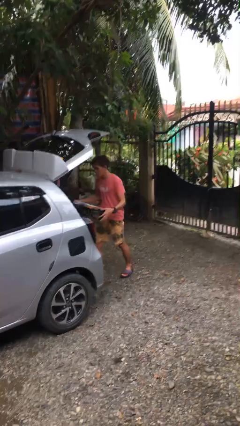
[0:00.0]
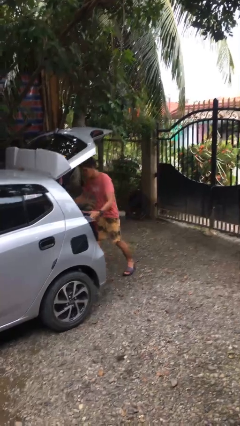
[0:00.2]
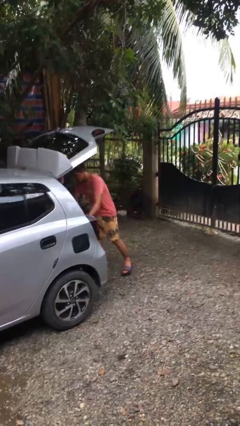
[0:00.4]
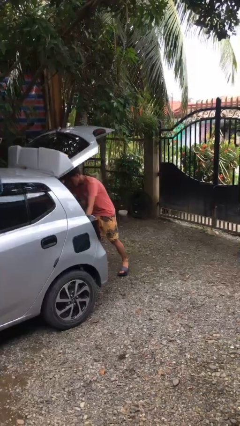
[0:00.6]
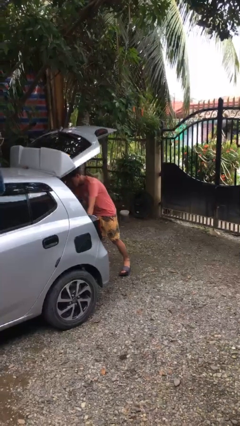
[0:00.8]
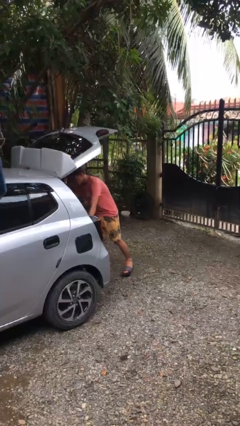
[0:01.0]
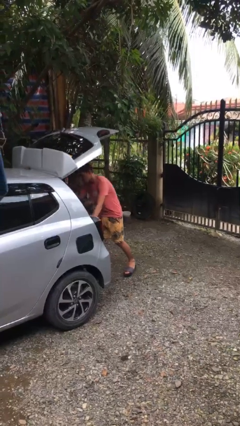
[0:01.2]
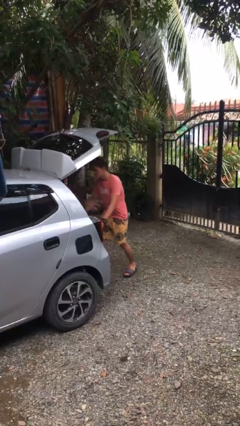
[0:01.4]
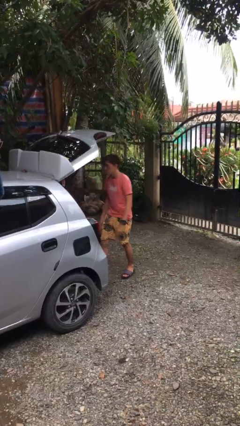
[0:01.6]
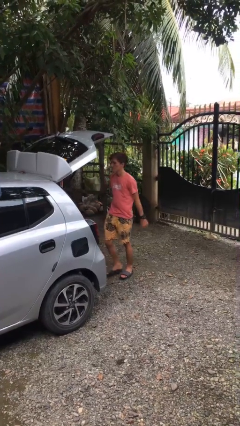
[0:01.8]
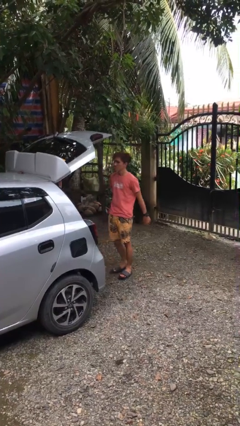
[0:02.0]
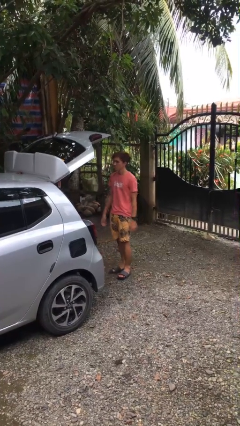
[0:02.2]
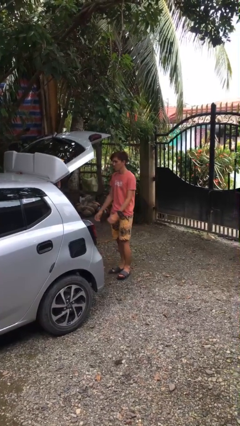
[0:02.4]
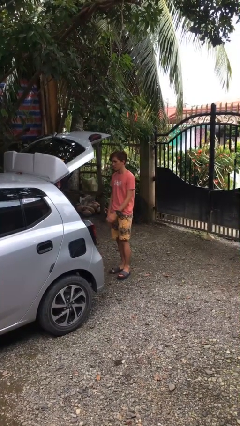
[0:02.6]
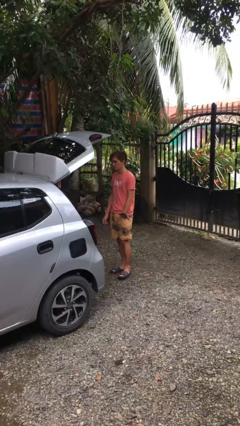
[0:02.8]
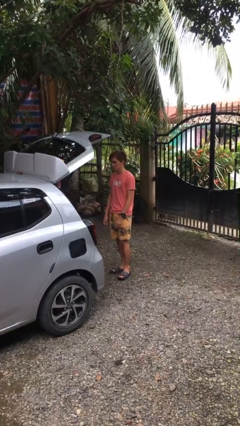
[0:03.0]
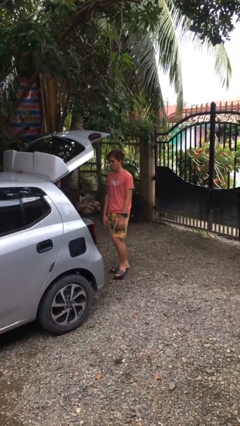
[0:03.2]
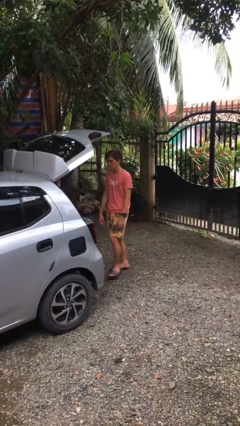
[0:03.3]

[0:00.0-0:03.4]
person loads car

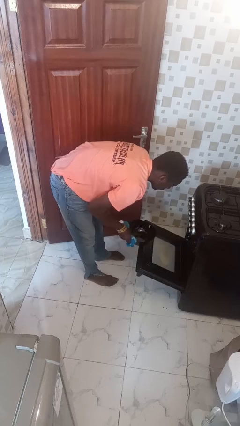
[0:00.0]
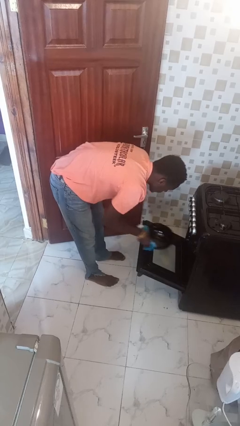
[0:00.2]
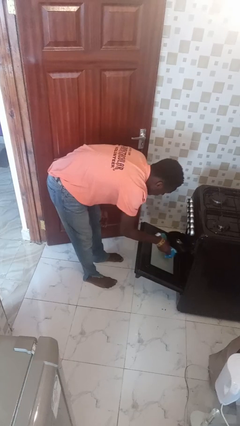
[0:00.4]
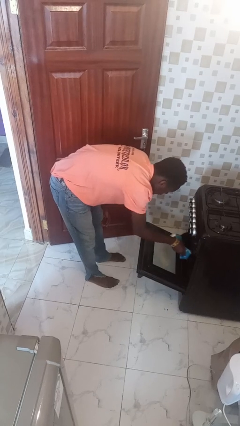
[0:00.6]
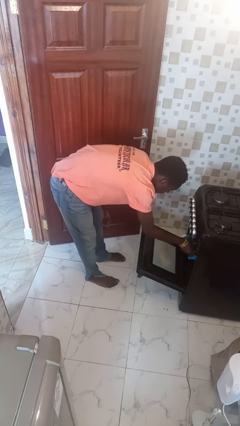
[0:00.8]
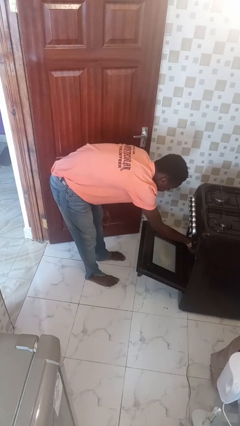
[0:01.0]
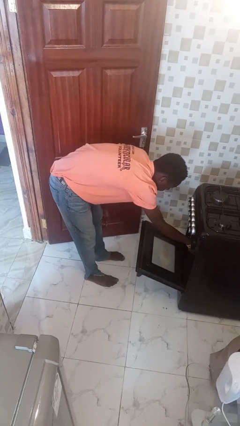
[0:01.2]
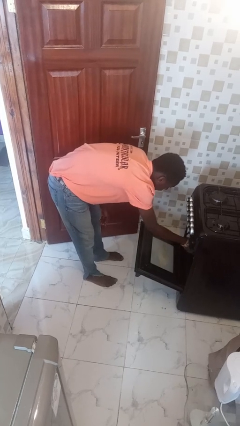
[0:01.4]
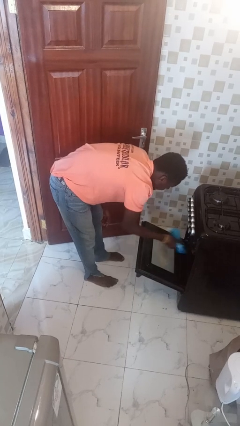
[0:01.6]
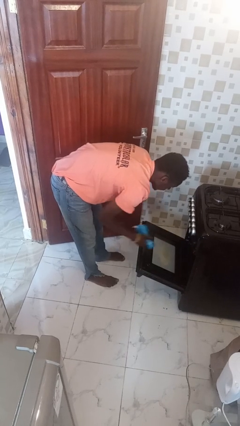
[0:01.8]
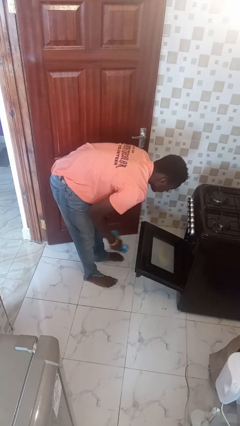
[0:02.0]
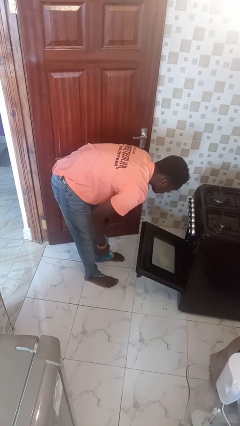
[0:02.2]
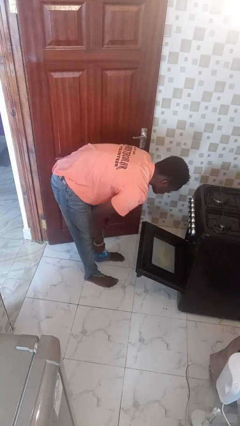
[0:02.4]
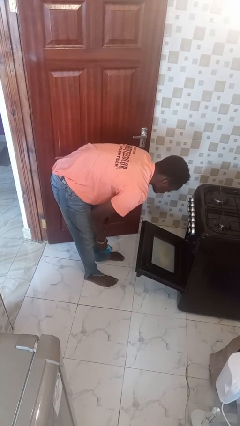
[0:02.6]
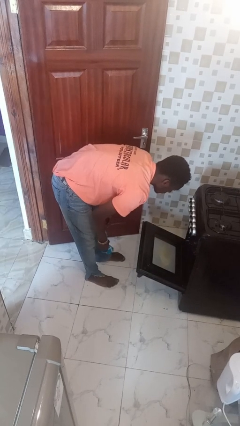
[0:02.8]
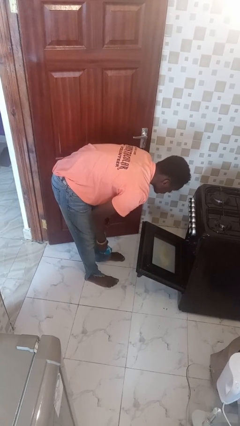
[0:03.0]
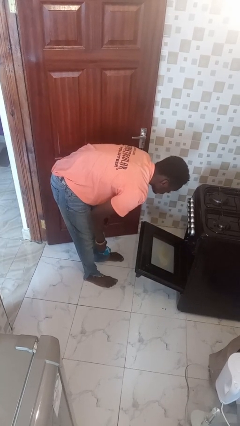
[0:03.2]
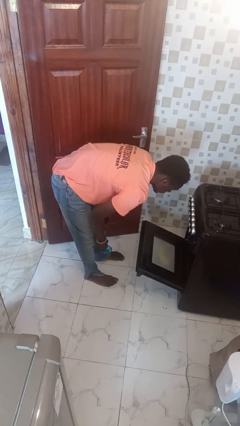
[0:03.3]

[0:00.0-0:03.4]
person puts object into oven

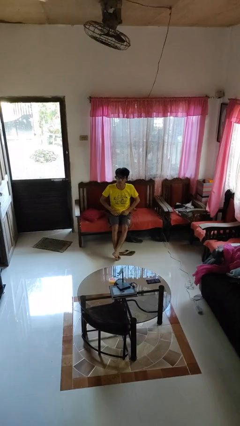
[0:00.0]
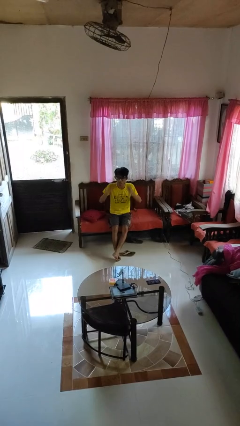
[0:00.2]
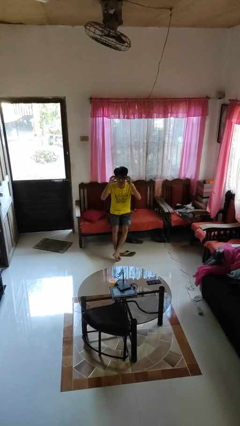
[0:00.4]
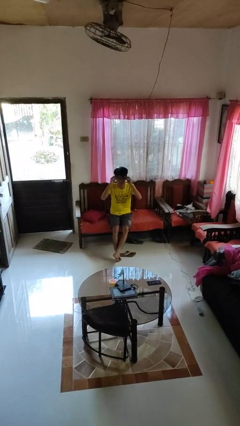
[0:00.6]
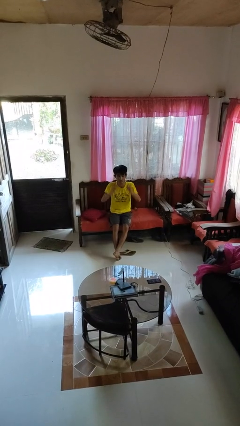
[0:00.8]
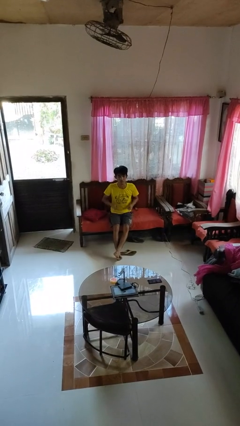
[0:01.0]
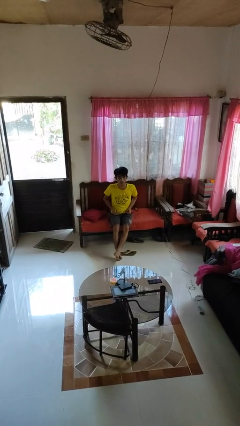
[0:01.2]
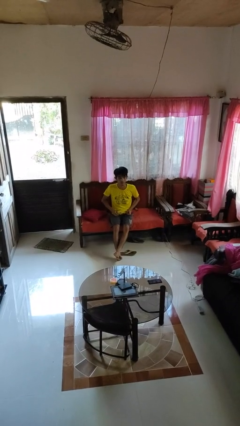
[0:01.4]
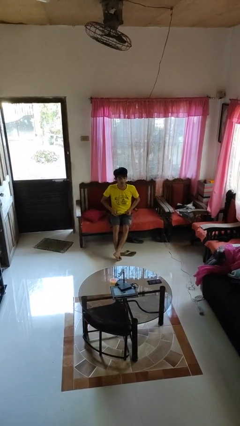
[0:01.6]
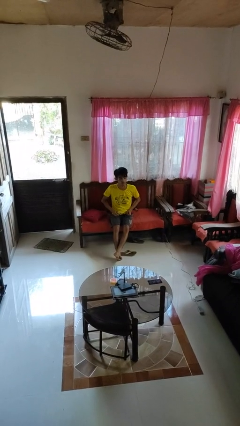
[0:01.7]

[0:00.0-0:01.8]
person takes off glasses

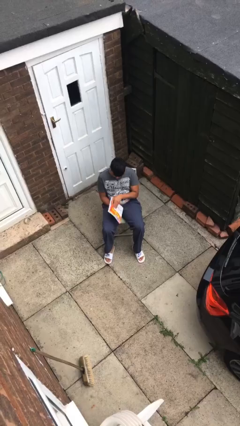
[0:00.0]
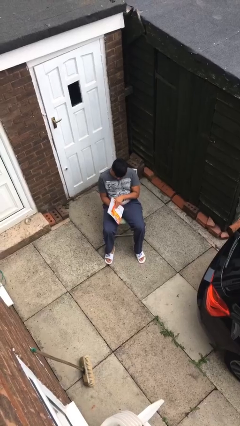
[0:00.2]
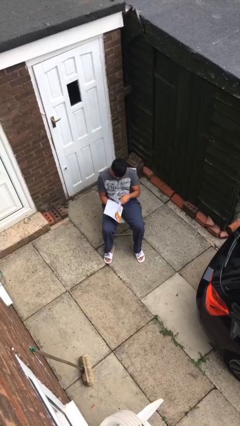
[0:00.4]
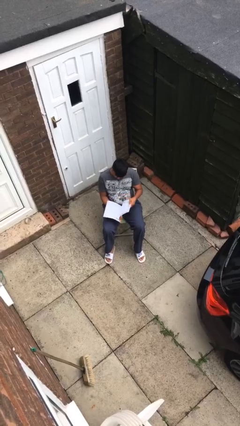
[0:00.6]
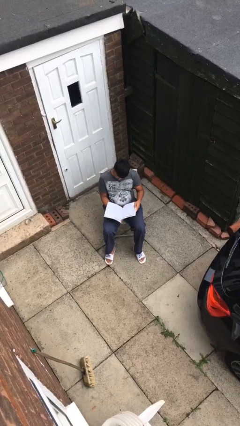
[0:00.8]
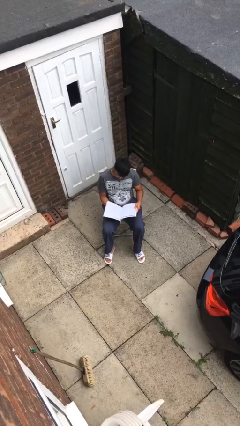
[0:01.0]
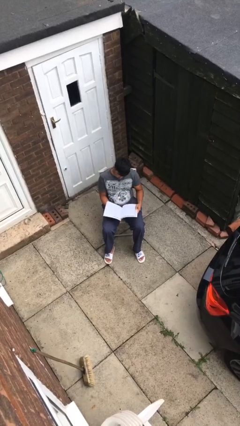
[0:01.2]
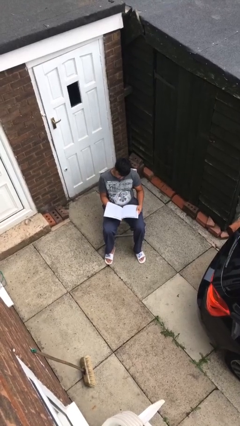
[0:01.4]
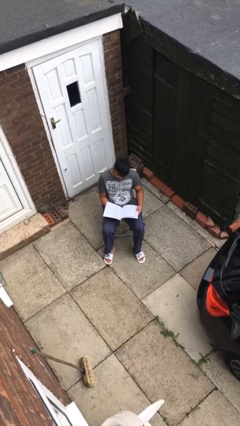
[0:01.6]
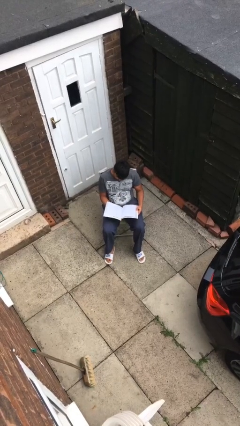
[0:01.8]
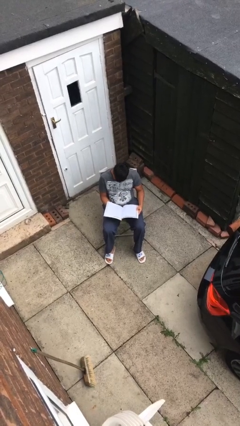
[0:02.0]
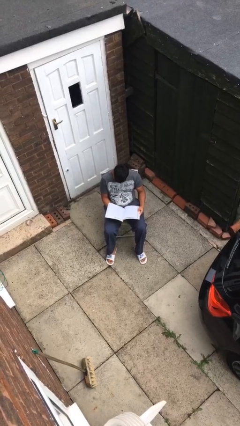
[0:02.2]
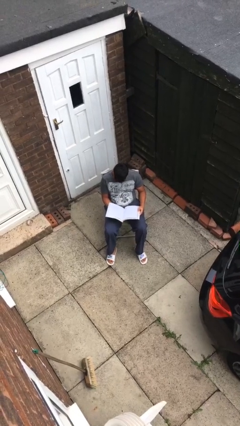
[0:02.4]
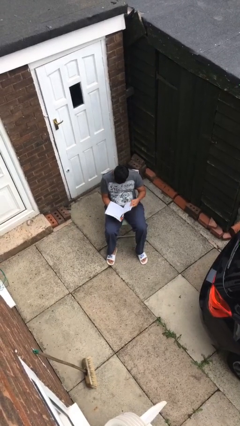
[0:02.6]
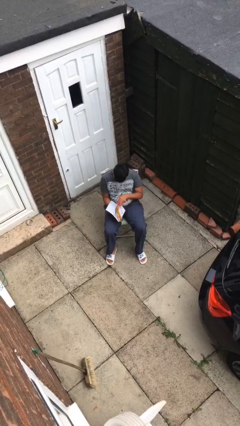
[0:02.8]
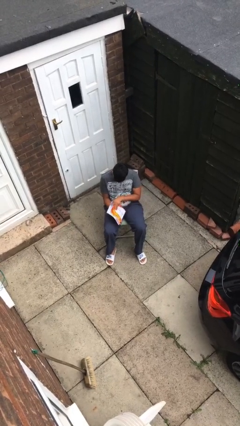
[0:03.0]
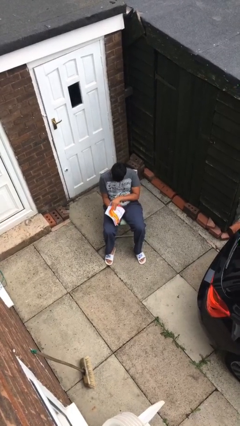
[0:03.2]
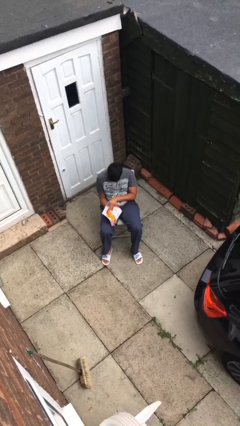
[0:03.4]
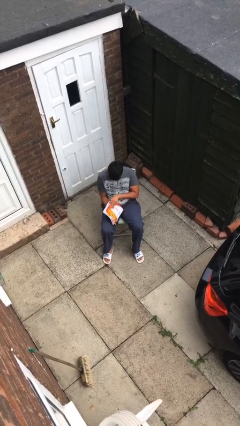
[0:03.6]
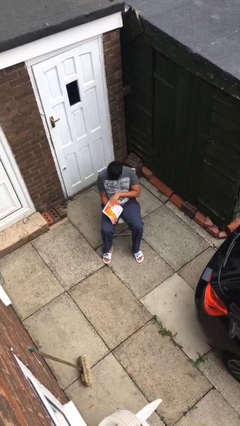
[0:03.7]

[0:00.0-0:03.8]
person reads magazine

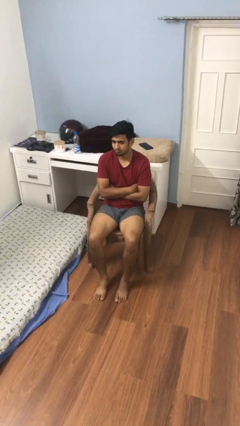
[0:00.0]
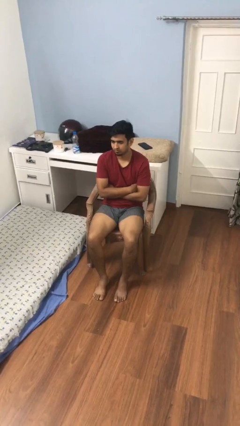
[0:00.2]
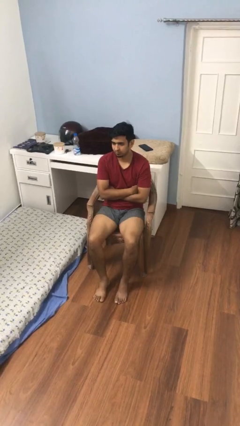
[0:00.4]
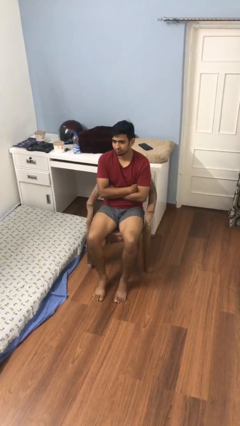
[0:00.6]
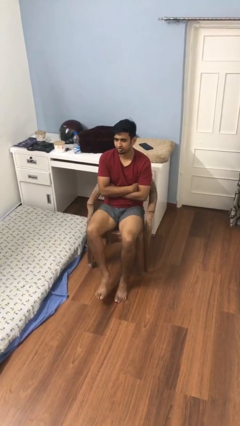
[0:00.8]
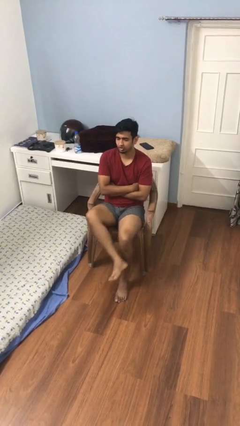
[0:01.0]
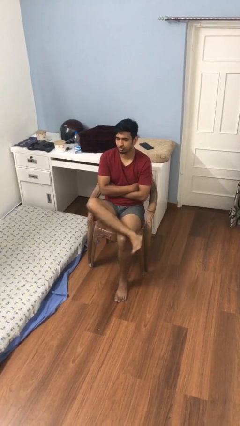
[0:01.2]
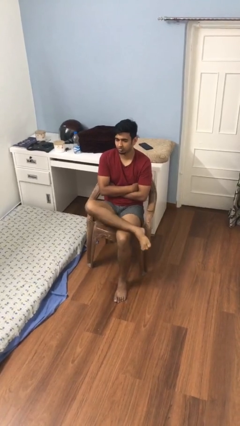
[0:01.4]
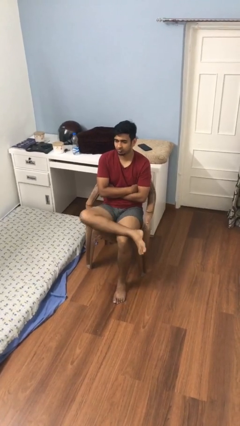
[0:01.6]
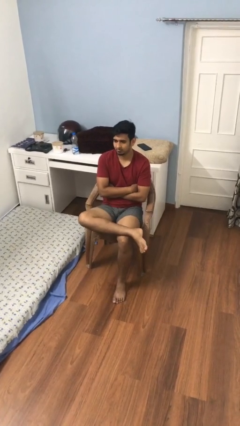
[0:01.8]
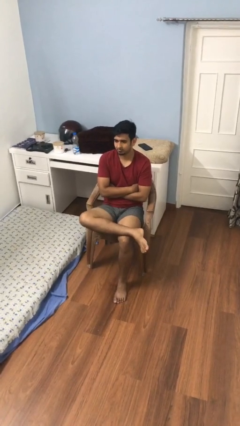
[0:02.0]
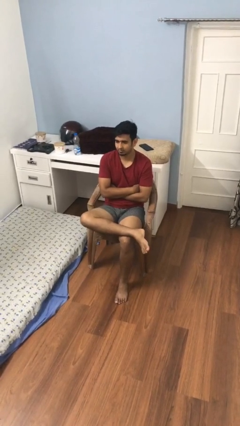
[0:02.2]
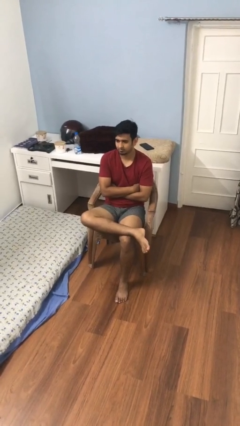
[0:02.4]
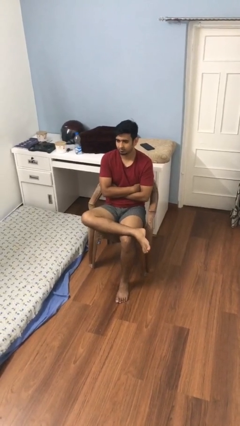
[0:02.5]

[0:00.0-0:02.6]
person crosses legs

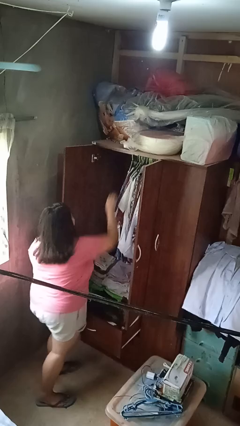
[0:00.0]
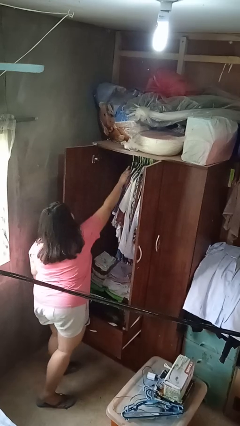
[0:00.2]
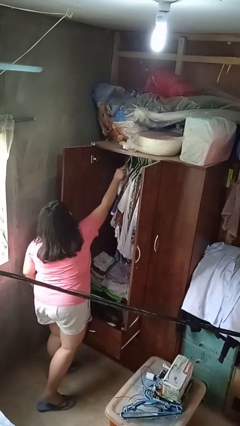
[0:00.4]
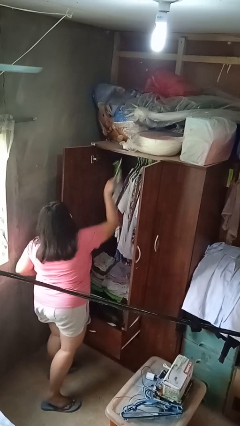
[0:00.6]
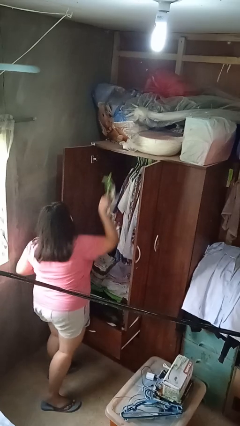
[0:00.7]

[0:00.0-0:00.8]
person takes clothes from closet

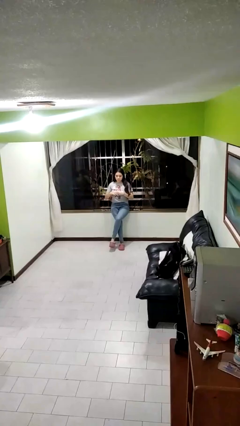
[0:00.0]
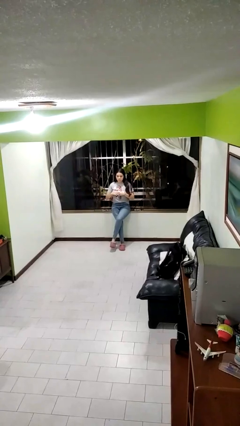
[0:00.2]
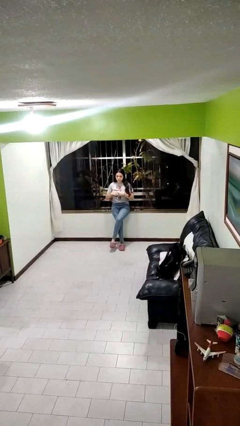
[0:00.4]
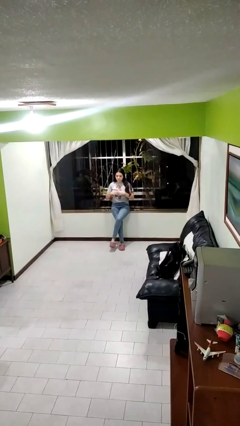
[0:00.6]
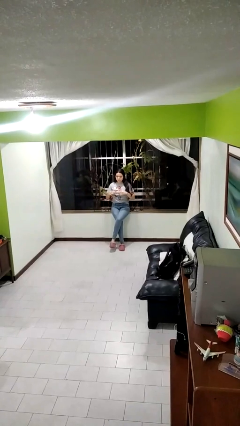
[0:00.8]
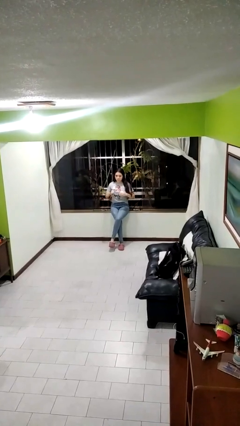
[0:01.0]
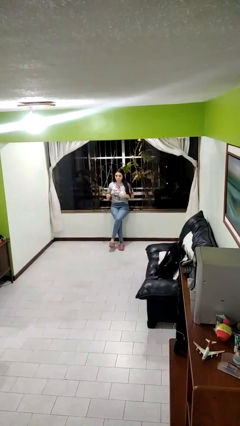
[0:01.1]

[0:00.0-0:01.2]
person takes off ring
